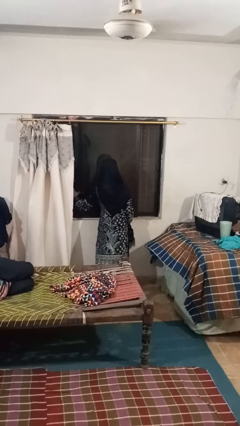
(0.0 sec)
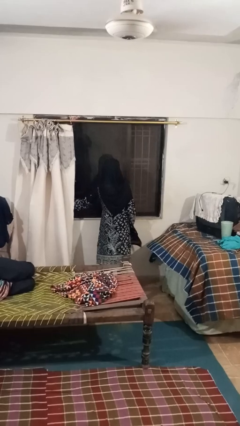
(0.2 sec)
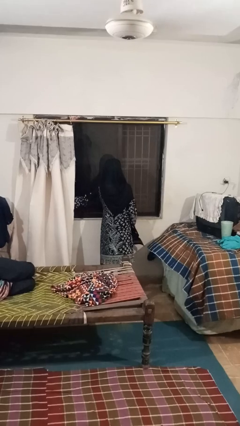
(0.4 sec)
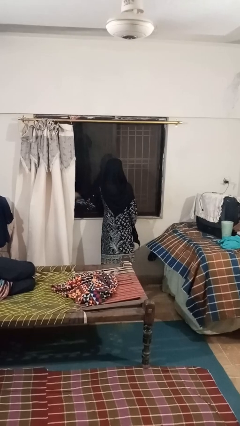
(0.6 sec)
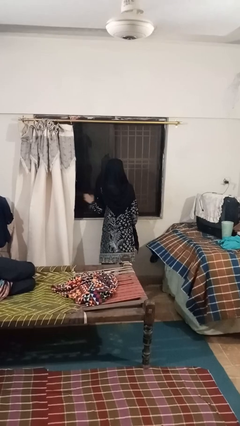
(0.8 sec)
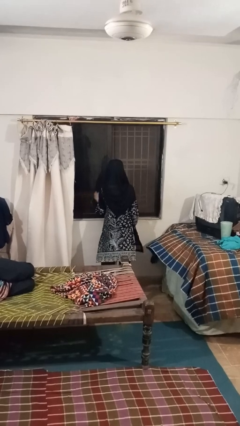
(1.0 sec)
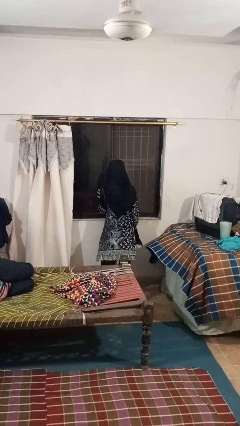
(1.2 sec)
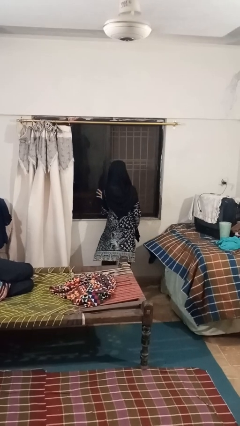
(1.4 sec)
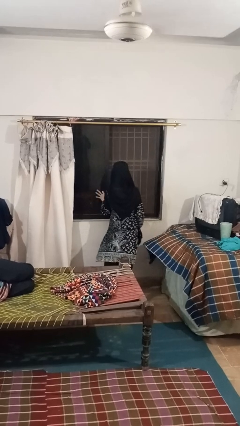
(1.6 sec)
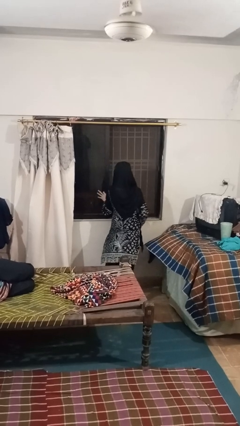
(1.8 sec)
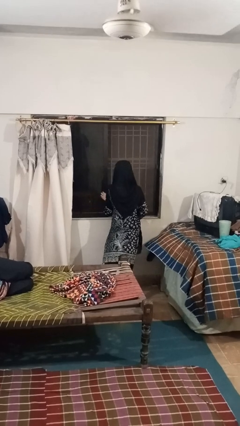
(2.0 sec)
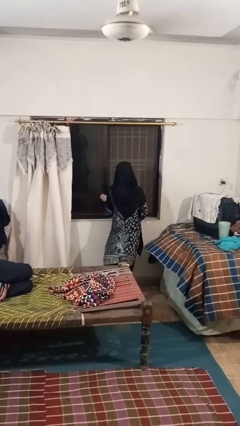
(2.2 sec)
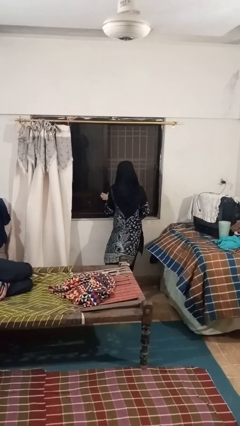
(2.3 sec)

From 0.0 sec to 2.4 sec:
person opens sliding door

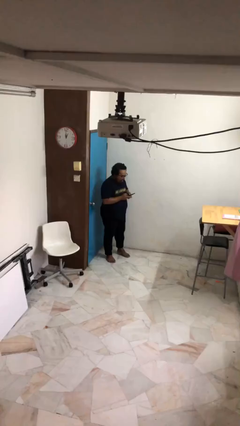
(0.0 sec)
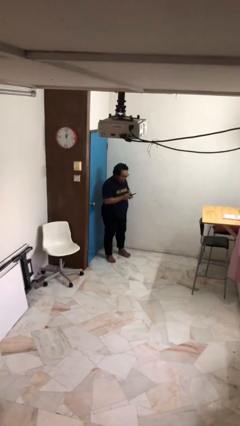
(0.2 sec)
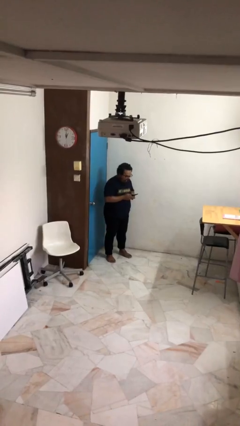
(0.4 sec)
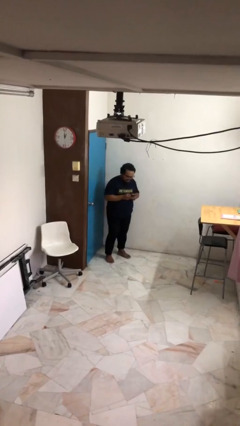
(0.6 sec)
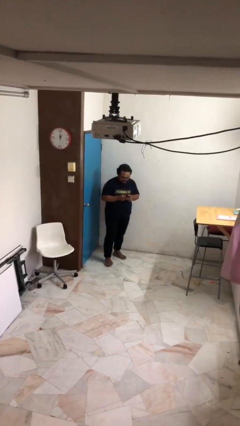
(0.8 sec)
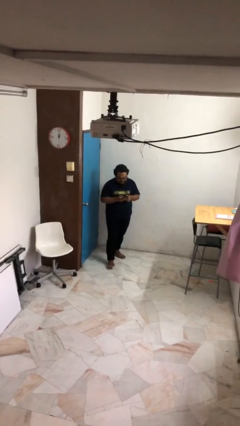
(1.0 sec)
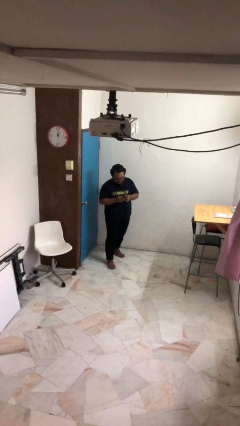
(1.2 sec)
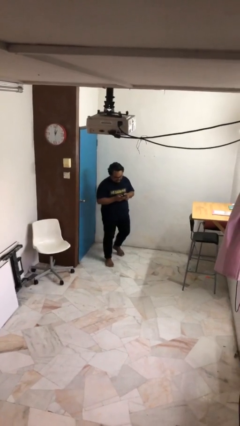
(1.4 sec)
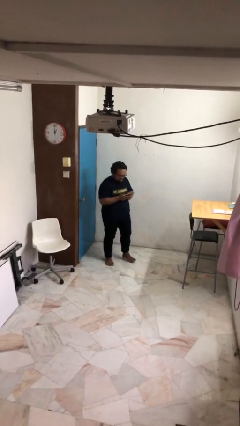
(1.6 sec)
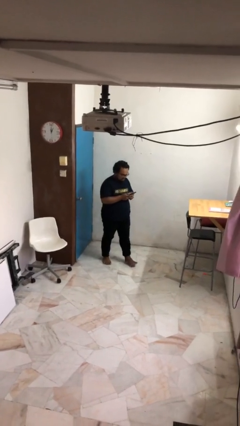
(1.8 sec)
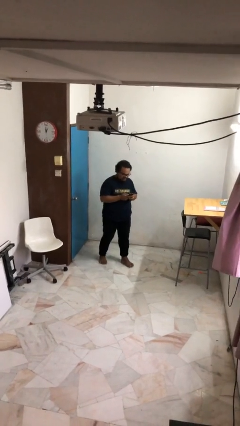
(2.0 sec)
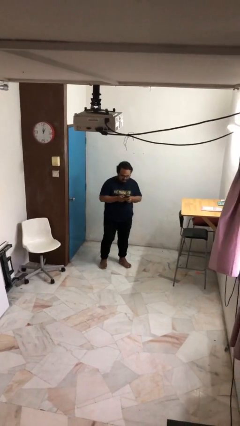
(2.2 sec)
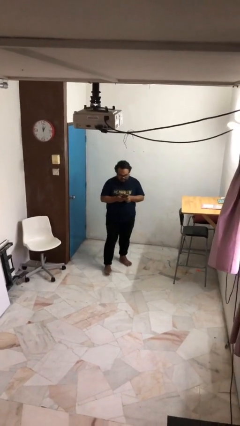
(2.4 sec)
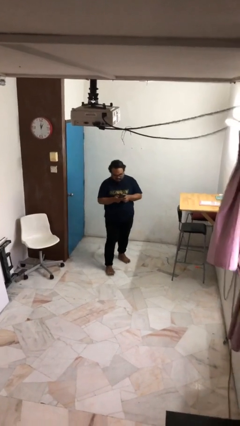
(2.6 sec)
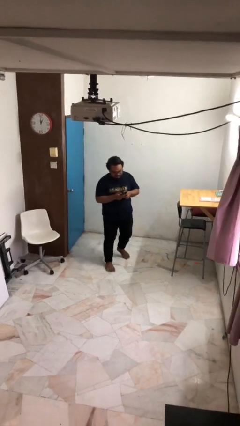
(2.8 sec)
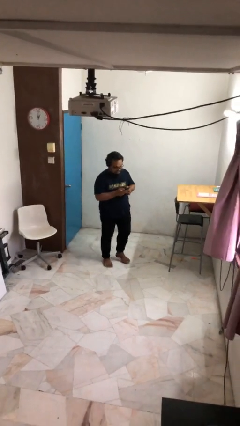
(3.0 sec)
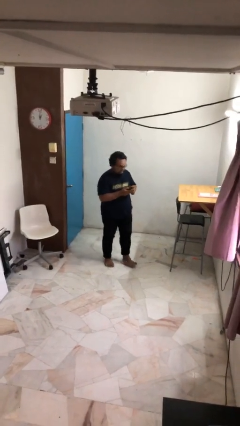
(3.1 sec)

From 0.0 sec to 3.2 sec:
person texts on phone

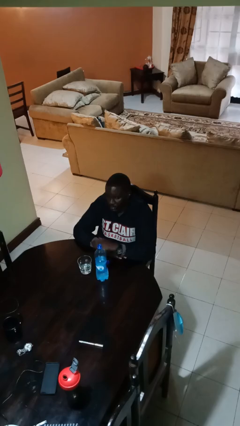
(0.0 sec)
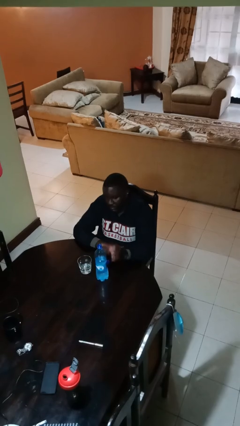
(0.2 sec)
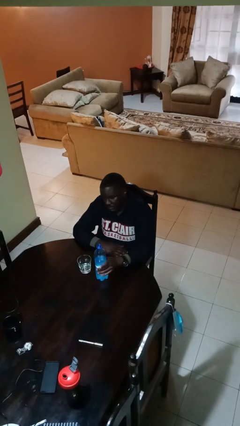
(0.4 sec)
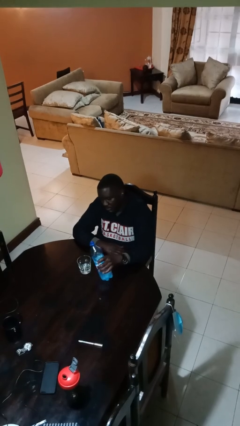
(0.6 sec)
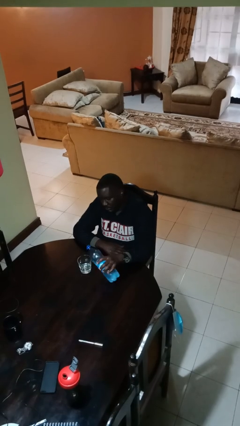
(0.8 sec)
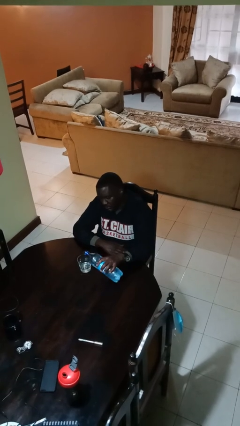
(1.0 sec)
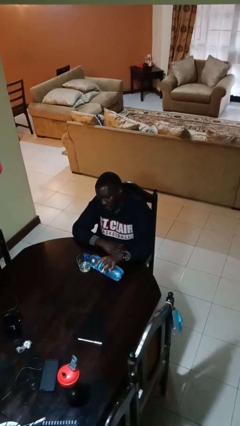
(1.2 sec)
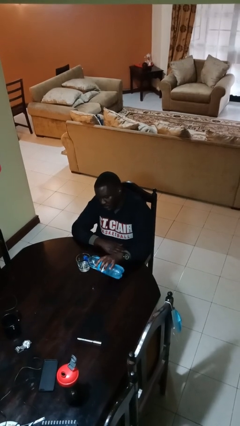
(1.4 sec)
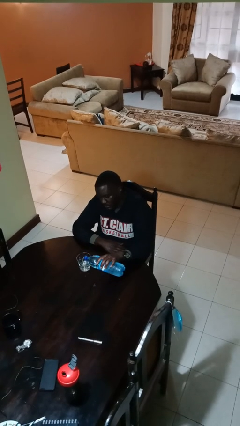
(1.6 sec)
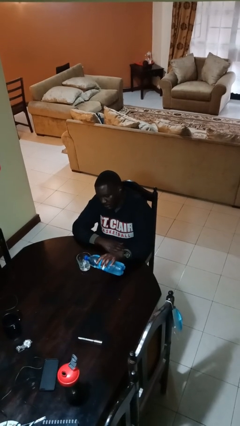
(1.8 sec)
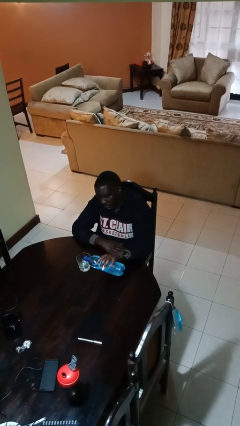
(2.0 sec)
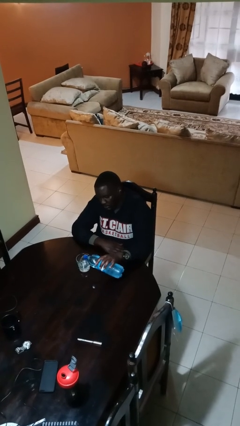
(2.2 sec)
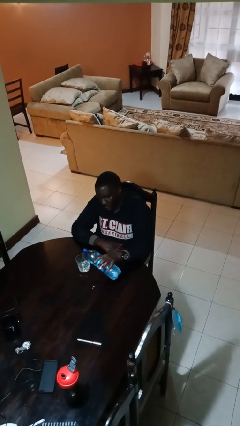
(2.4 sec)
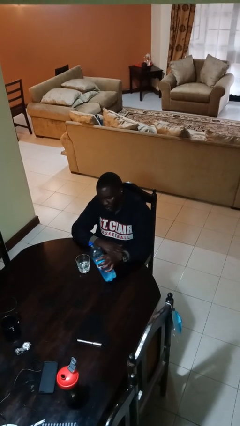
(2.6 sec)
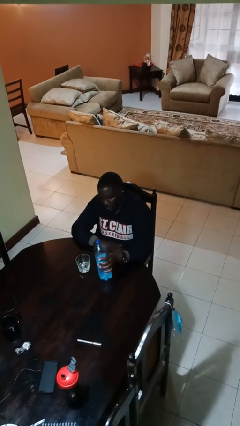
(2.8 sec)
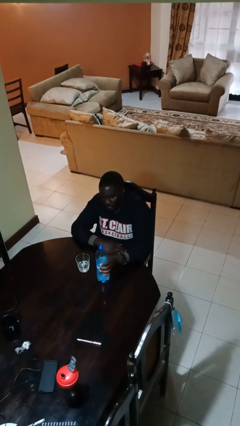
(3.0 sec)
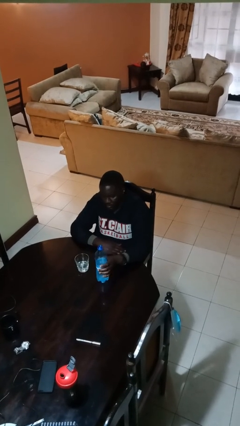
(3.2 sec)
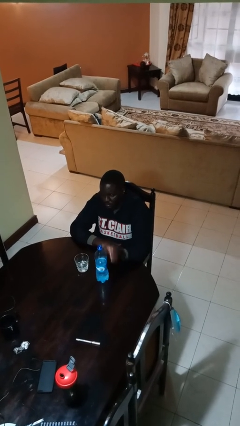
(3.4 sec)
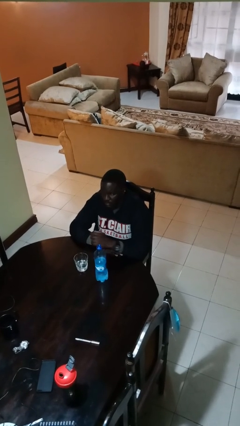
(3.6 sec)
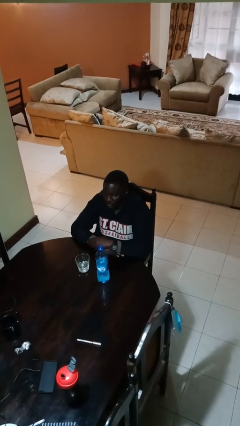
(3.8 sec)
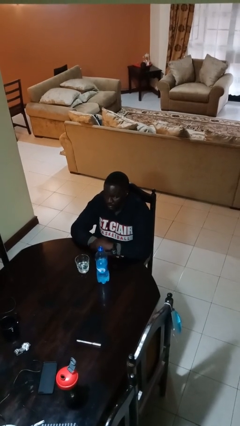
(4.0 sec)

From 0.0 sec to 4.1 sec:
person pours liquid into cup

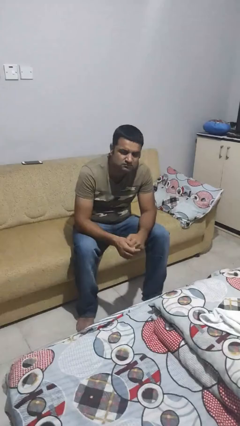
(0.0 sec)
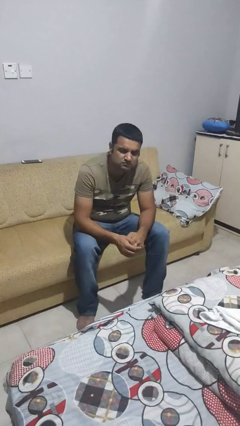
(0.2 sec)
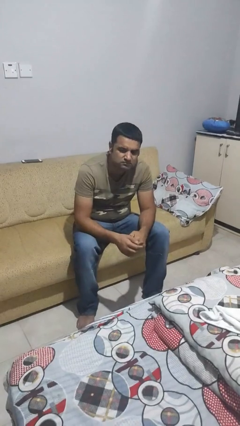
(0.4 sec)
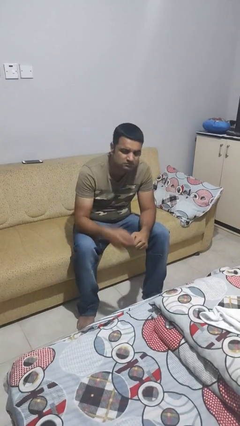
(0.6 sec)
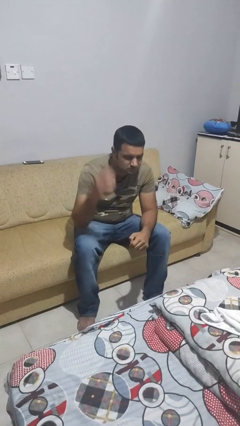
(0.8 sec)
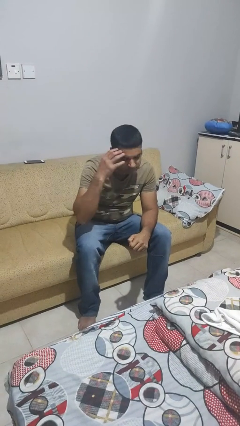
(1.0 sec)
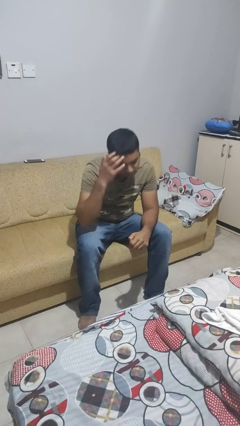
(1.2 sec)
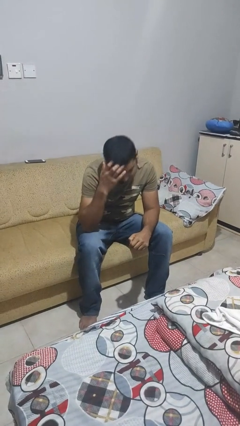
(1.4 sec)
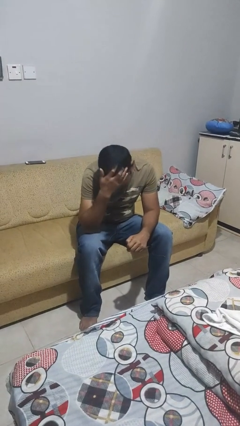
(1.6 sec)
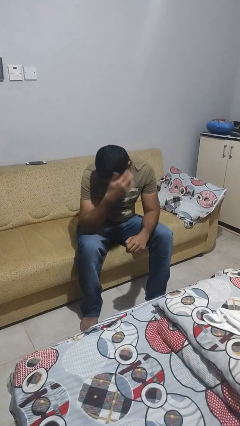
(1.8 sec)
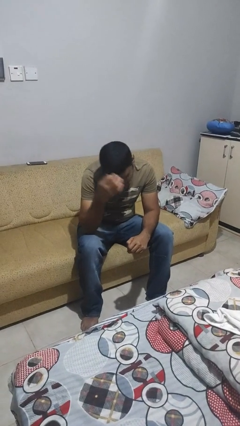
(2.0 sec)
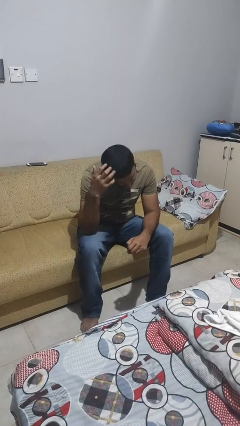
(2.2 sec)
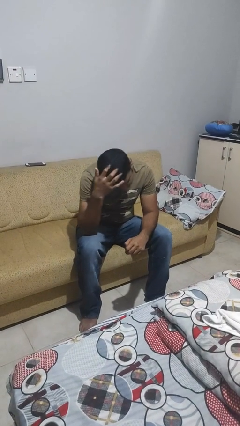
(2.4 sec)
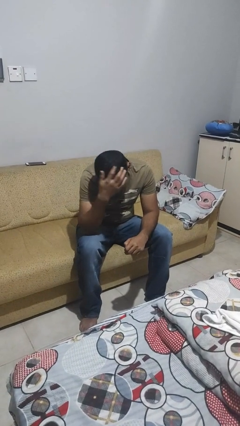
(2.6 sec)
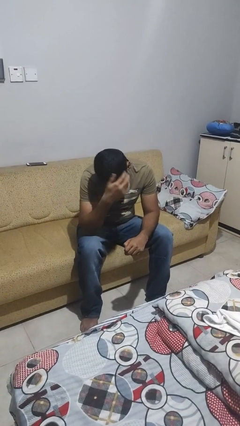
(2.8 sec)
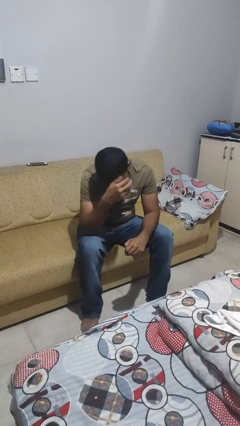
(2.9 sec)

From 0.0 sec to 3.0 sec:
person strokes hair

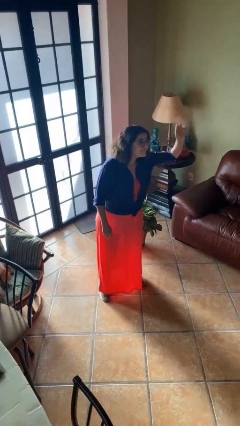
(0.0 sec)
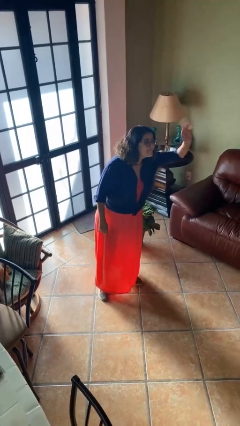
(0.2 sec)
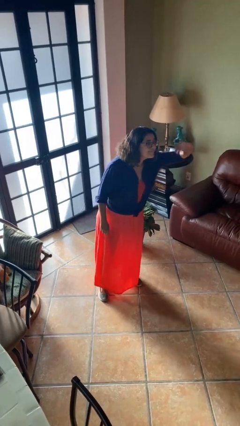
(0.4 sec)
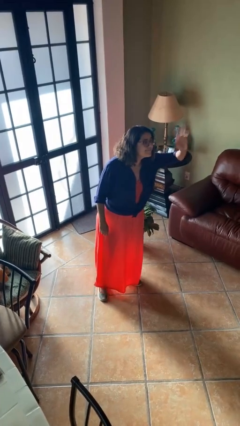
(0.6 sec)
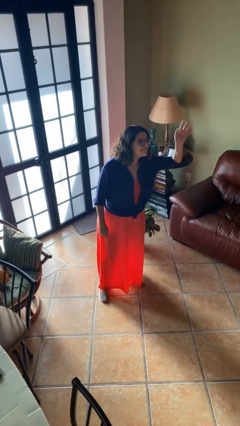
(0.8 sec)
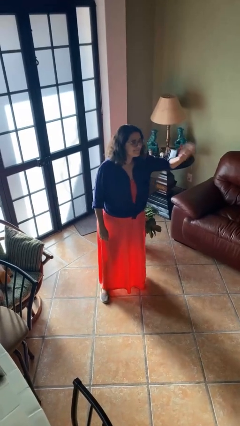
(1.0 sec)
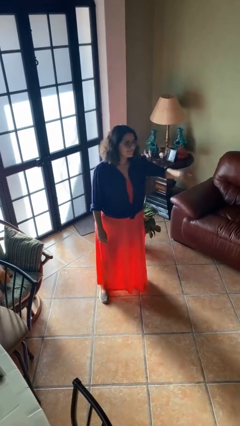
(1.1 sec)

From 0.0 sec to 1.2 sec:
person waves at person

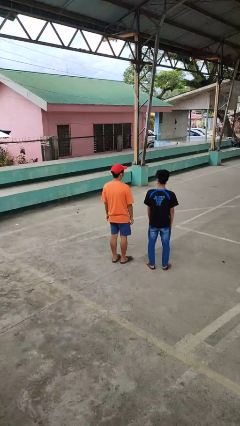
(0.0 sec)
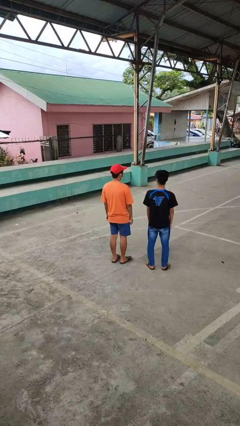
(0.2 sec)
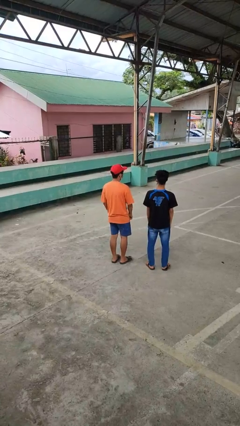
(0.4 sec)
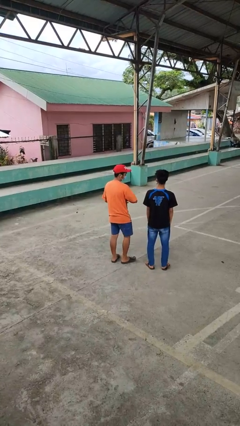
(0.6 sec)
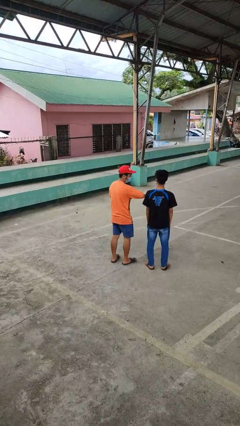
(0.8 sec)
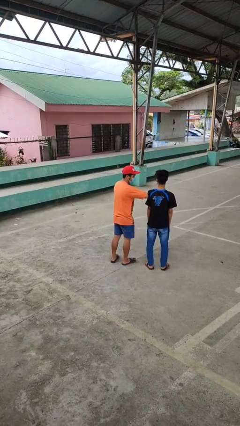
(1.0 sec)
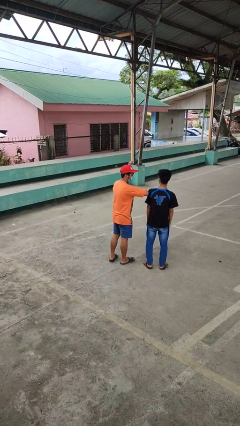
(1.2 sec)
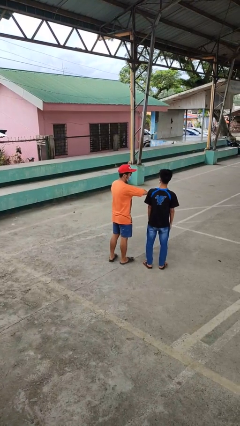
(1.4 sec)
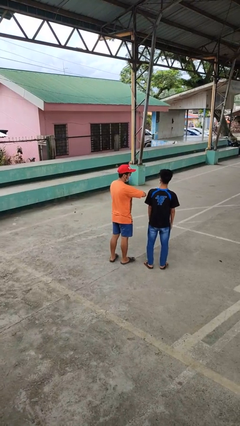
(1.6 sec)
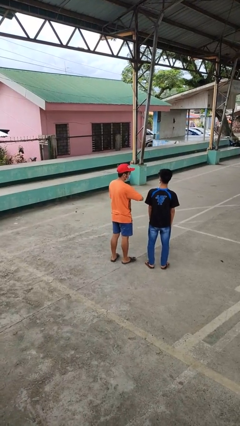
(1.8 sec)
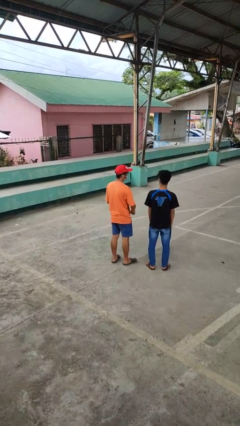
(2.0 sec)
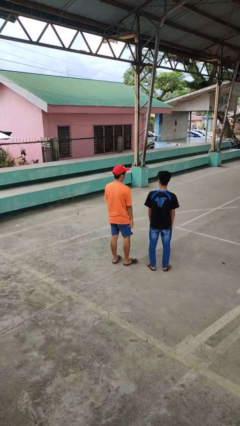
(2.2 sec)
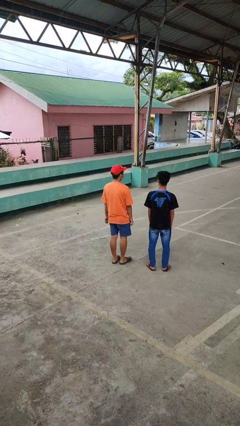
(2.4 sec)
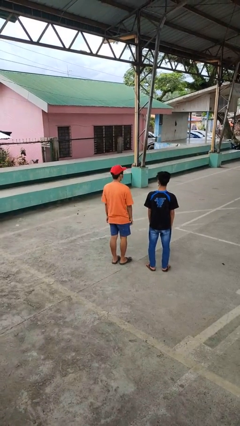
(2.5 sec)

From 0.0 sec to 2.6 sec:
person nudges person with elbow

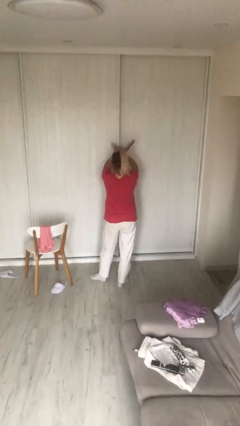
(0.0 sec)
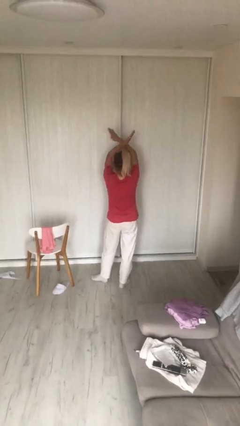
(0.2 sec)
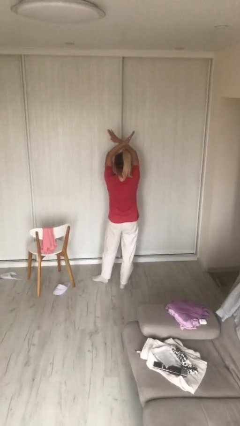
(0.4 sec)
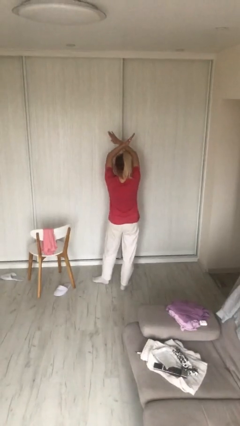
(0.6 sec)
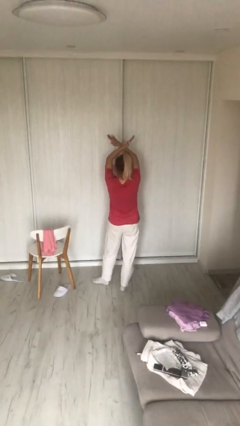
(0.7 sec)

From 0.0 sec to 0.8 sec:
person gestures arms x
